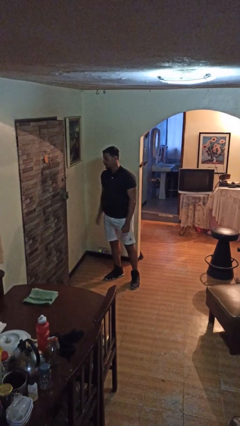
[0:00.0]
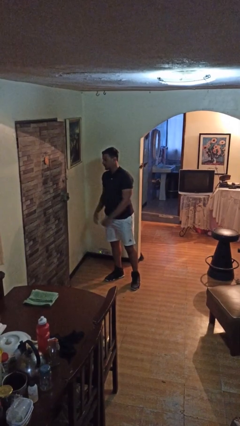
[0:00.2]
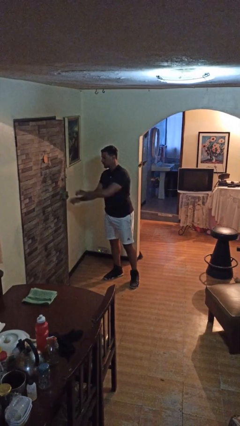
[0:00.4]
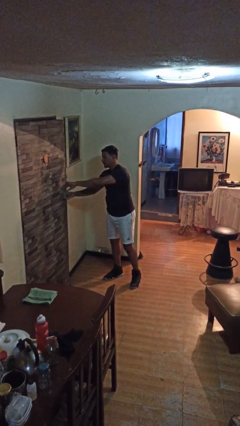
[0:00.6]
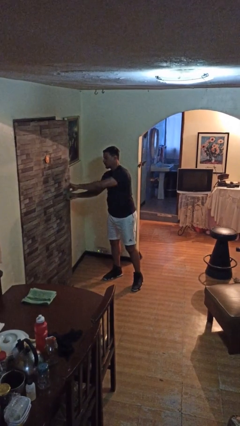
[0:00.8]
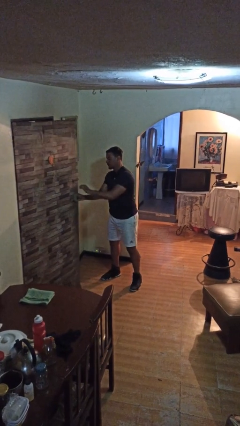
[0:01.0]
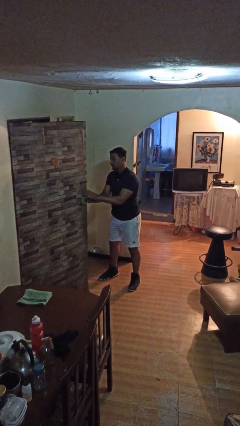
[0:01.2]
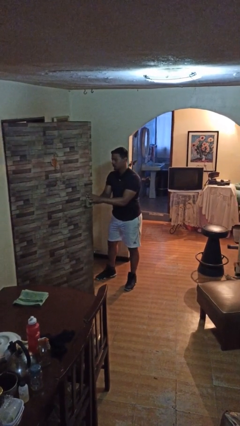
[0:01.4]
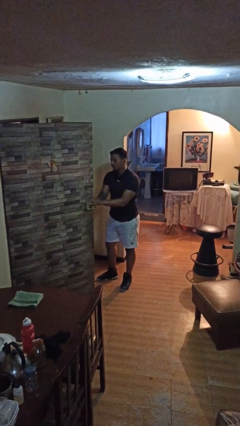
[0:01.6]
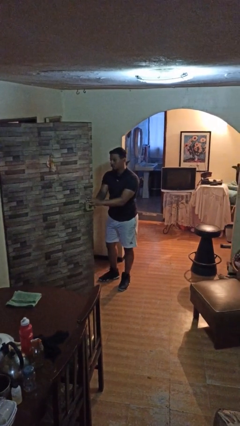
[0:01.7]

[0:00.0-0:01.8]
person opens facility door

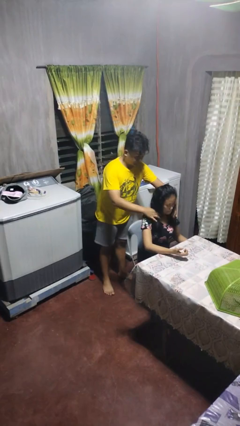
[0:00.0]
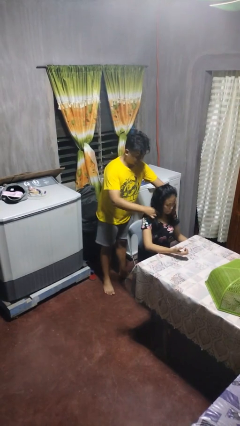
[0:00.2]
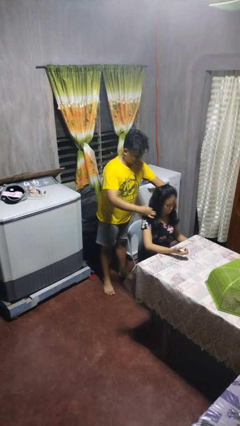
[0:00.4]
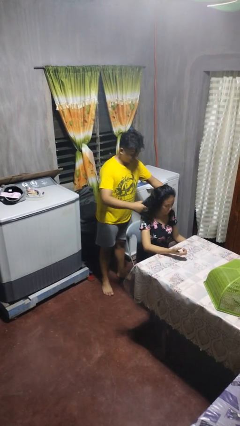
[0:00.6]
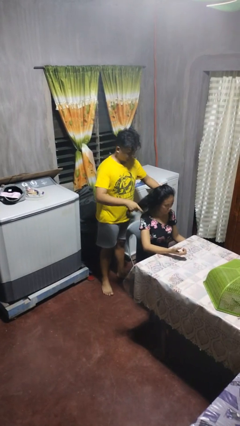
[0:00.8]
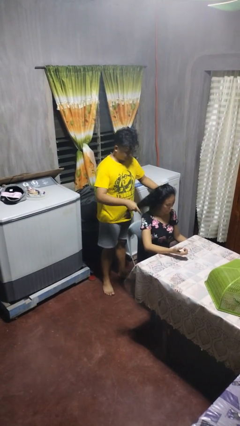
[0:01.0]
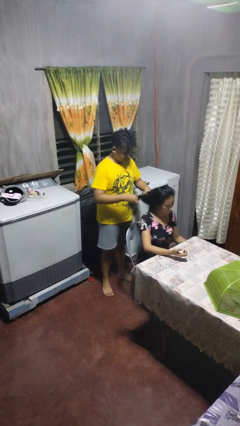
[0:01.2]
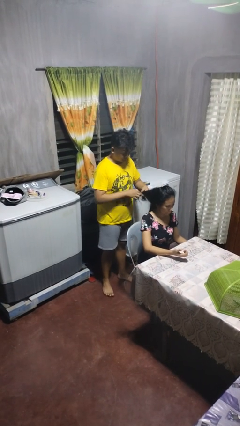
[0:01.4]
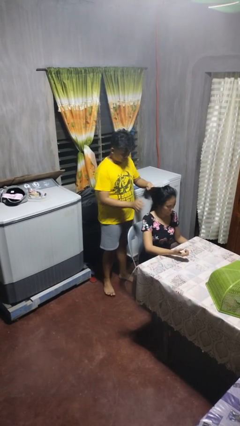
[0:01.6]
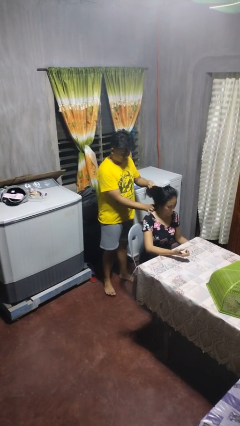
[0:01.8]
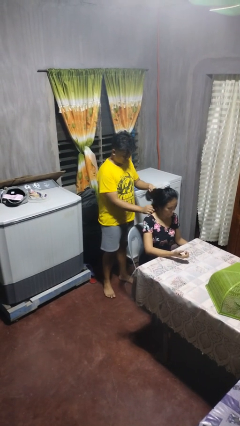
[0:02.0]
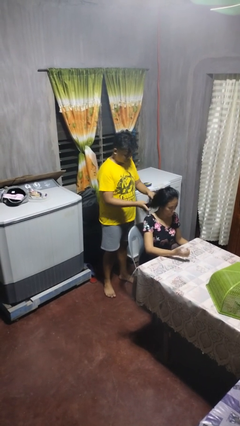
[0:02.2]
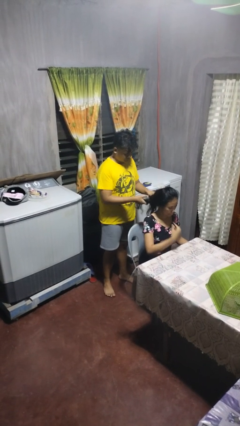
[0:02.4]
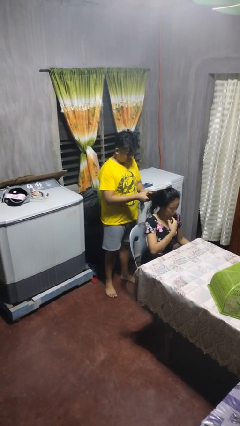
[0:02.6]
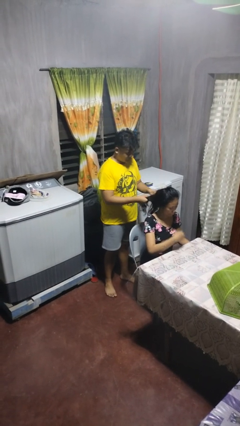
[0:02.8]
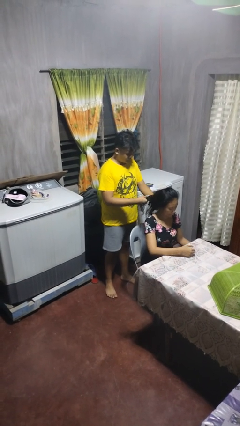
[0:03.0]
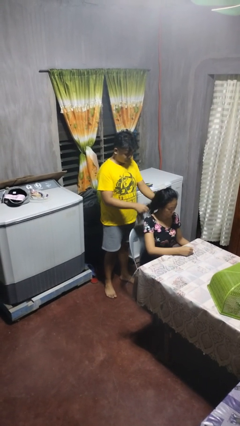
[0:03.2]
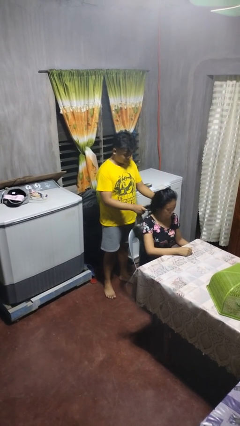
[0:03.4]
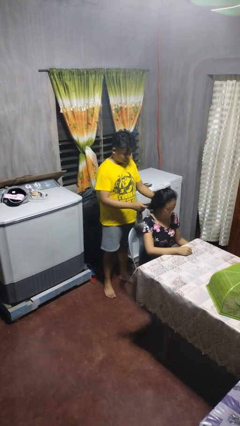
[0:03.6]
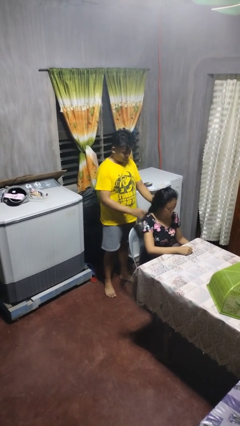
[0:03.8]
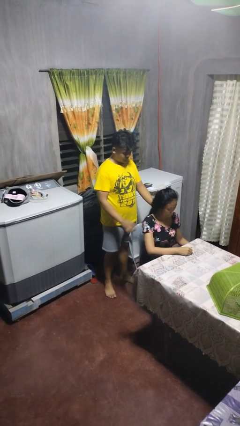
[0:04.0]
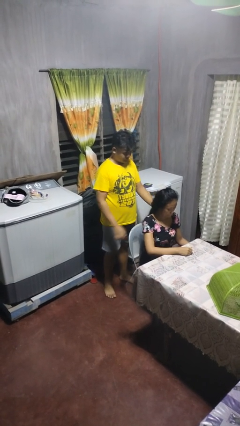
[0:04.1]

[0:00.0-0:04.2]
person braids hair of person

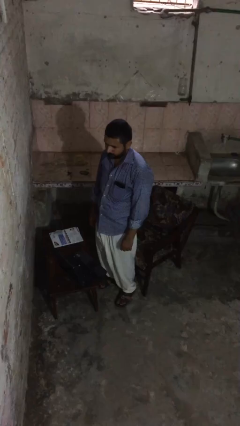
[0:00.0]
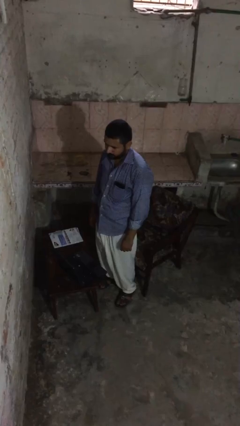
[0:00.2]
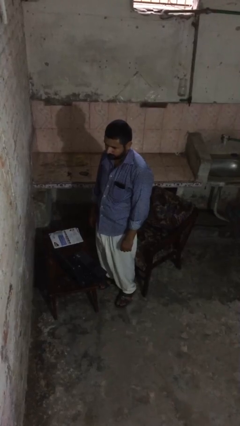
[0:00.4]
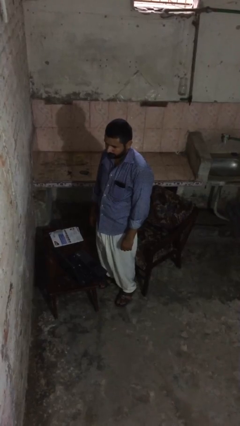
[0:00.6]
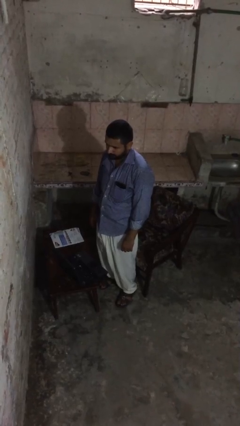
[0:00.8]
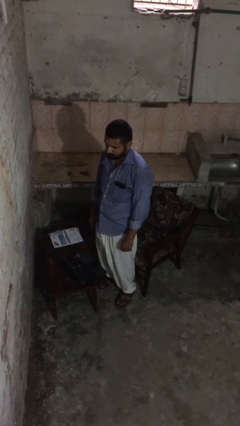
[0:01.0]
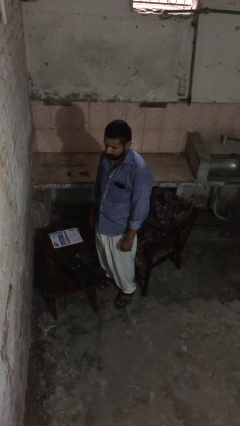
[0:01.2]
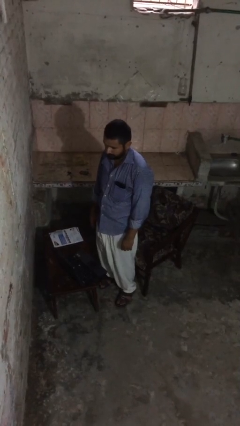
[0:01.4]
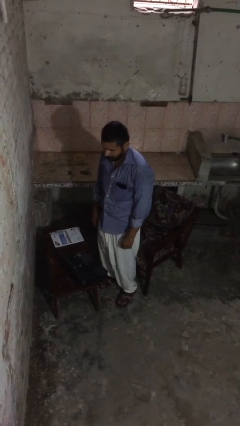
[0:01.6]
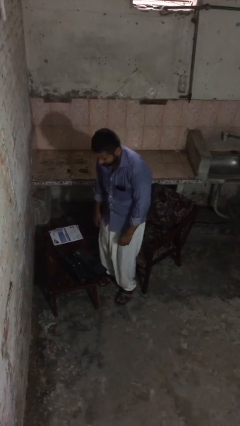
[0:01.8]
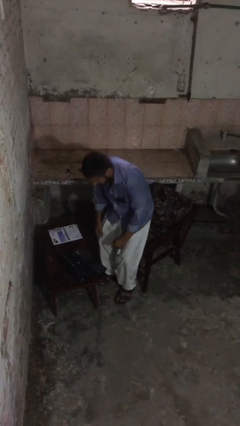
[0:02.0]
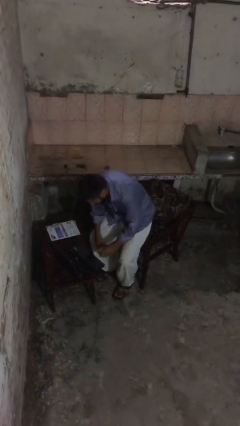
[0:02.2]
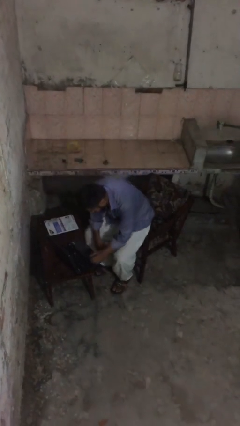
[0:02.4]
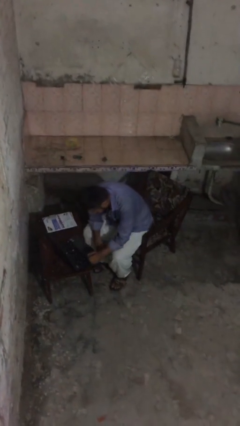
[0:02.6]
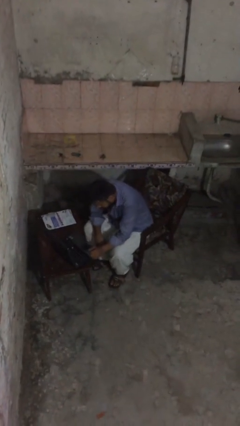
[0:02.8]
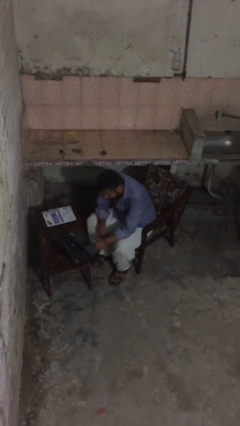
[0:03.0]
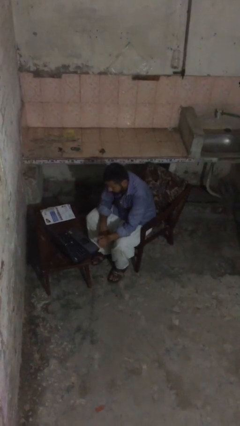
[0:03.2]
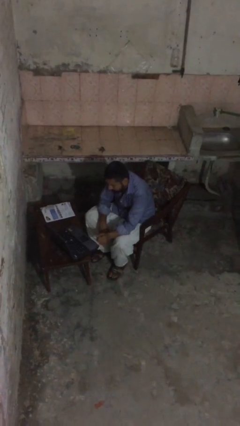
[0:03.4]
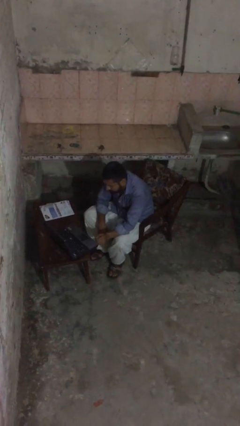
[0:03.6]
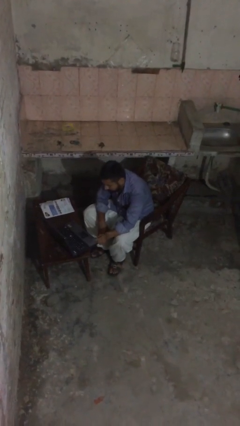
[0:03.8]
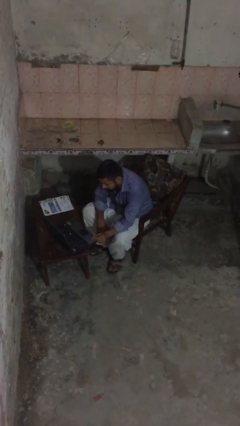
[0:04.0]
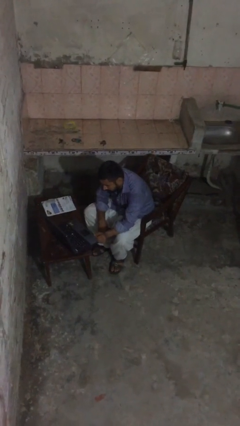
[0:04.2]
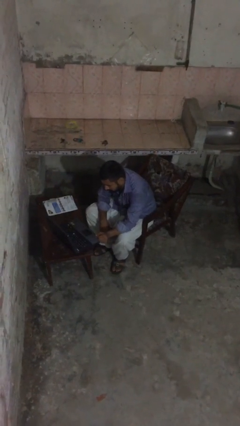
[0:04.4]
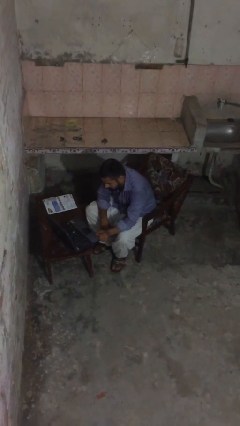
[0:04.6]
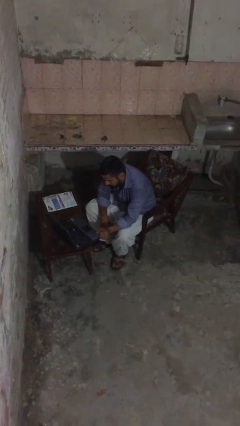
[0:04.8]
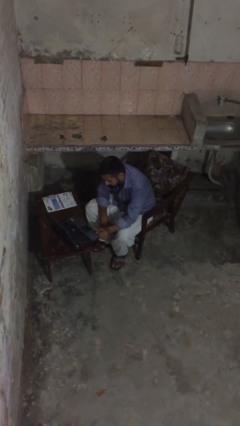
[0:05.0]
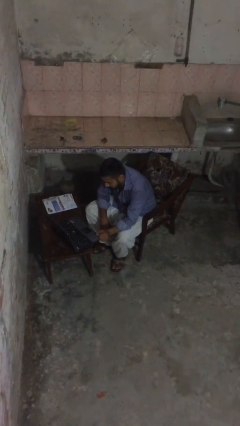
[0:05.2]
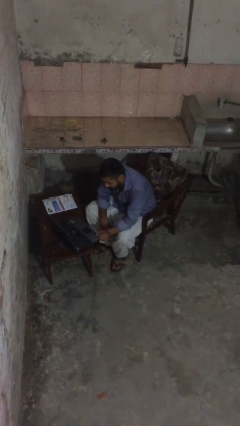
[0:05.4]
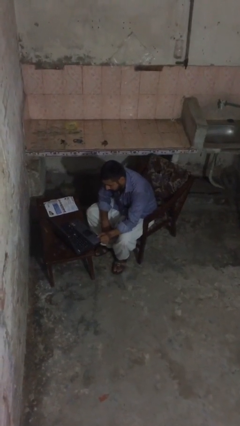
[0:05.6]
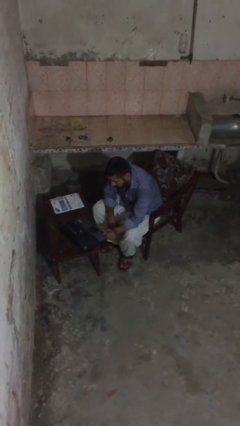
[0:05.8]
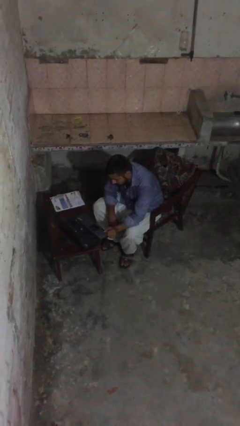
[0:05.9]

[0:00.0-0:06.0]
person sits down

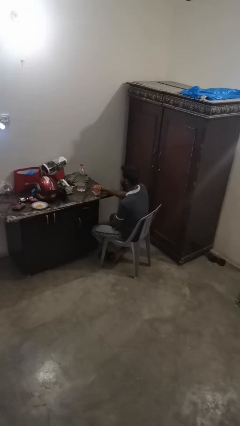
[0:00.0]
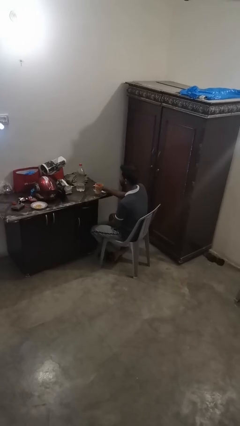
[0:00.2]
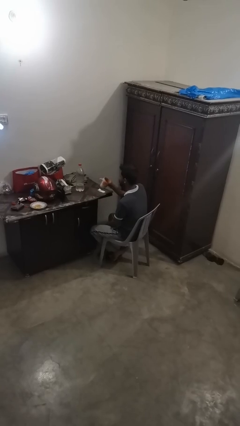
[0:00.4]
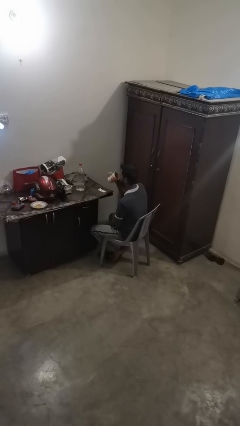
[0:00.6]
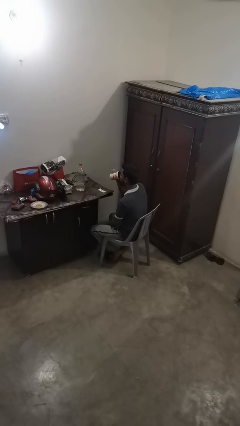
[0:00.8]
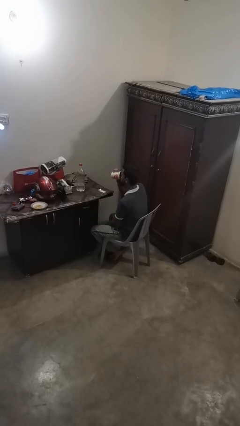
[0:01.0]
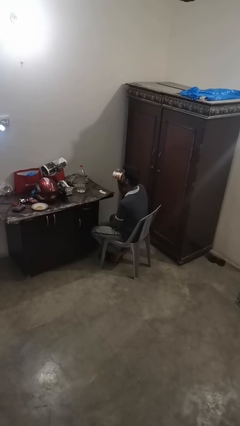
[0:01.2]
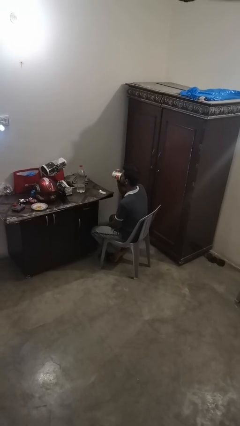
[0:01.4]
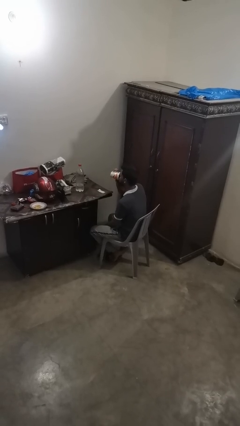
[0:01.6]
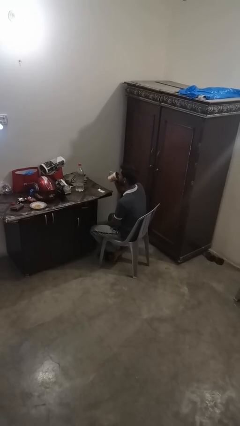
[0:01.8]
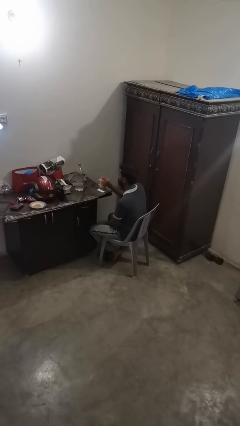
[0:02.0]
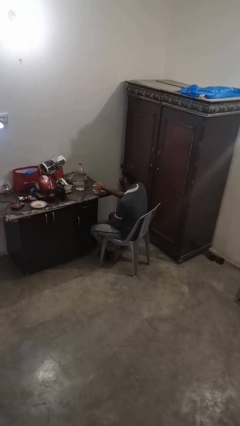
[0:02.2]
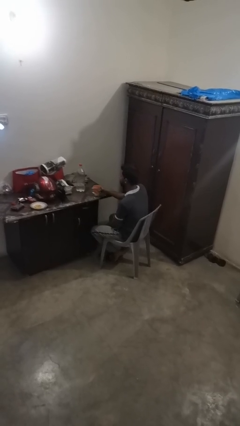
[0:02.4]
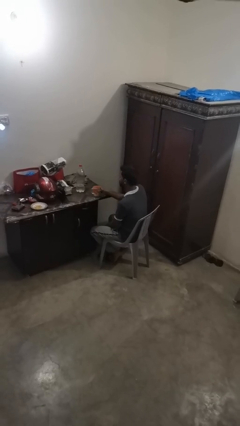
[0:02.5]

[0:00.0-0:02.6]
person drinks from cup

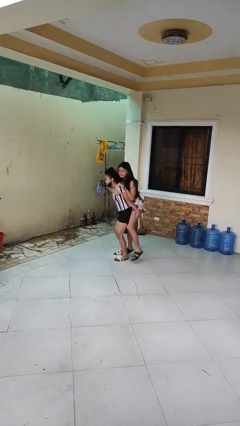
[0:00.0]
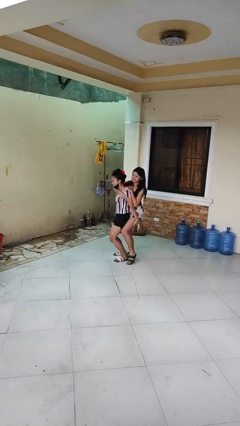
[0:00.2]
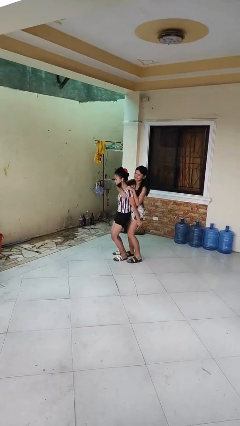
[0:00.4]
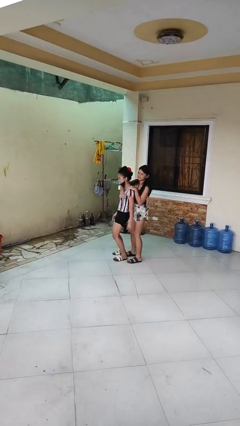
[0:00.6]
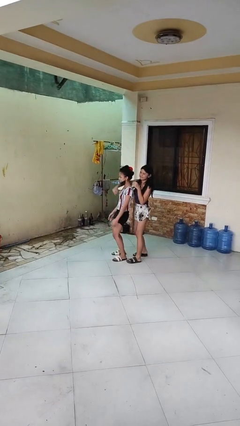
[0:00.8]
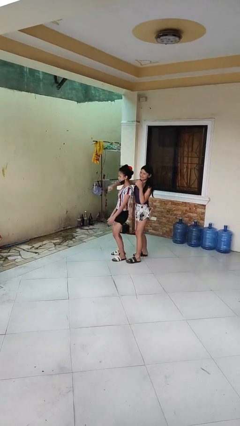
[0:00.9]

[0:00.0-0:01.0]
person puts down person

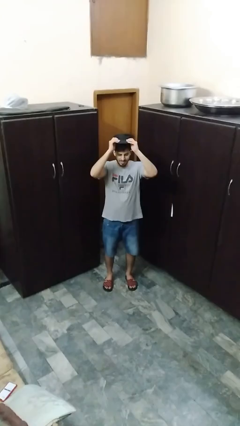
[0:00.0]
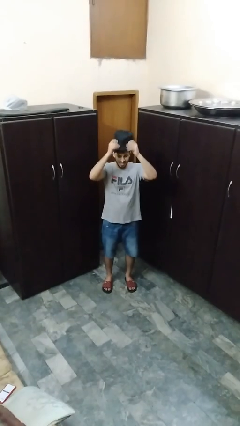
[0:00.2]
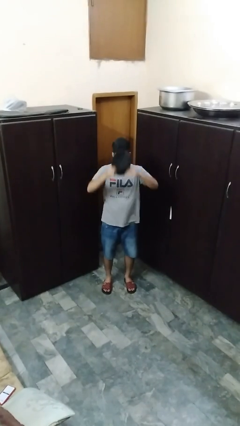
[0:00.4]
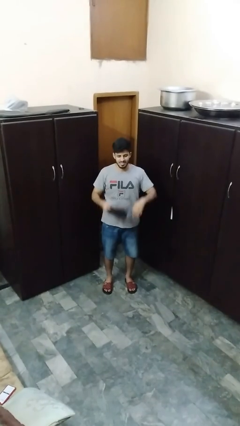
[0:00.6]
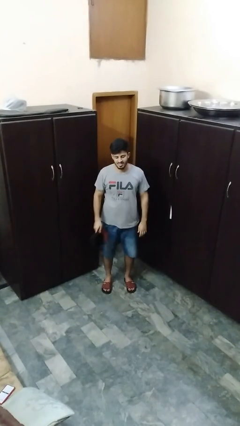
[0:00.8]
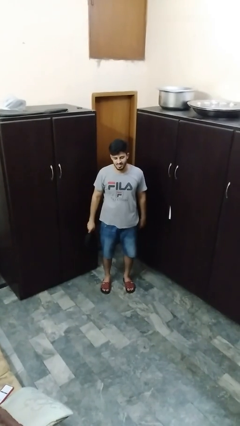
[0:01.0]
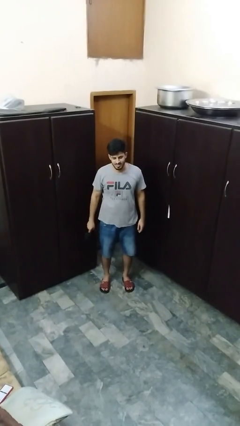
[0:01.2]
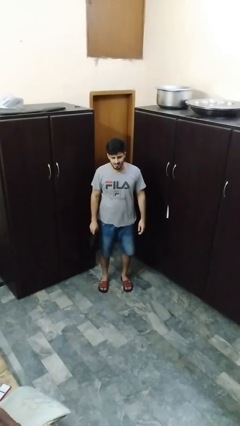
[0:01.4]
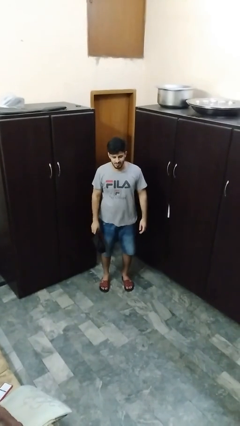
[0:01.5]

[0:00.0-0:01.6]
person takes off hat
